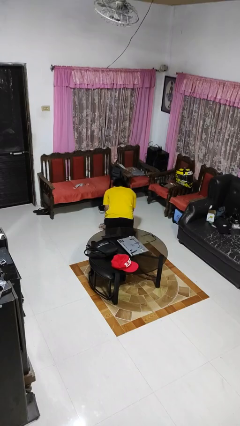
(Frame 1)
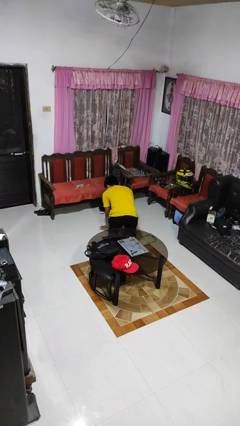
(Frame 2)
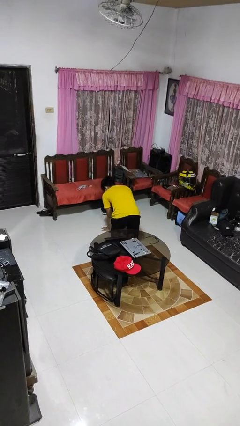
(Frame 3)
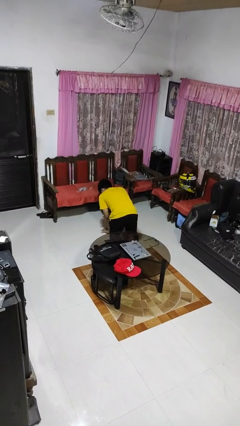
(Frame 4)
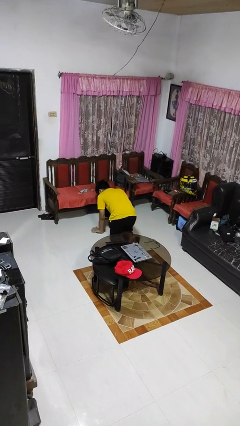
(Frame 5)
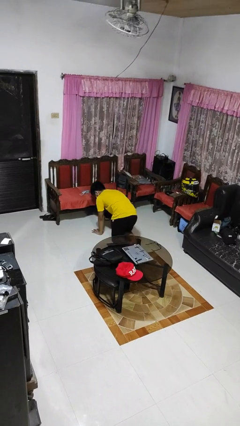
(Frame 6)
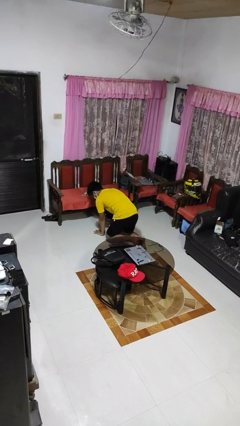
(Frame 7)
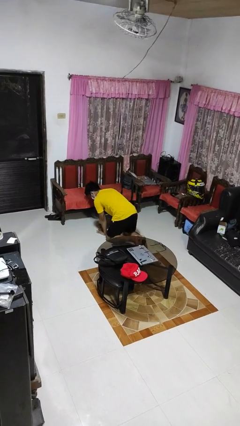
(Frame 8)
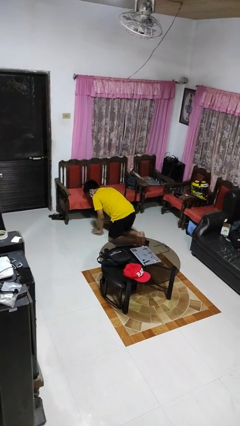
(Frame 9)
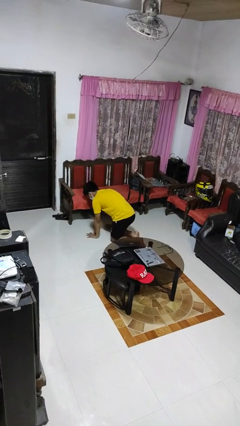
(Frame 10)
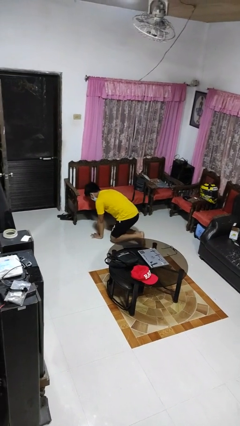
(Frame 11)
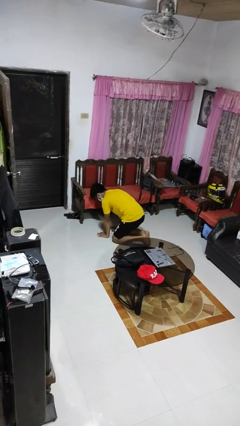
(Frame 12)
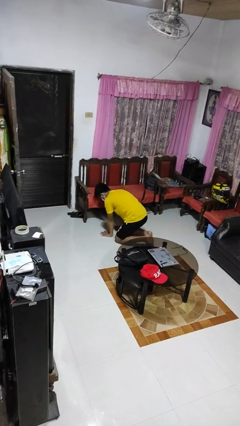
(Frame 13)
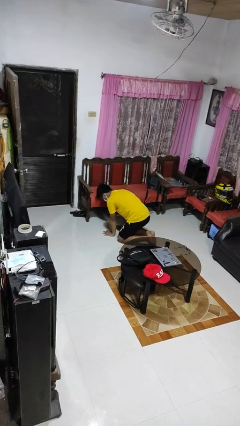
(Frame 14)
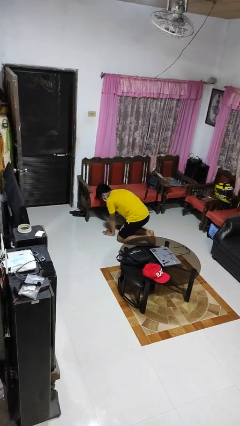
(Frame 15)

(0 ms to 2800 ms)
person crawls

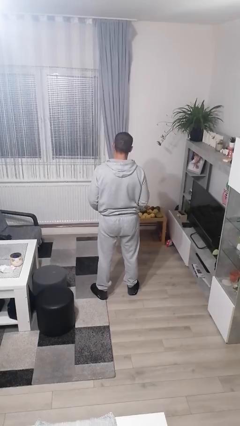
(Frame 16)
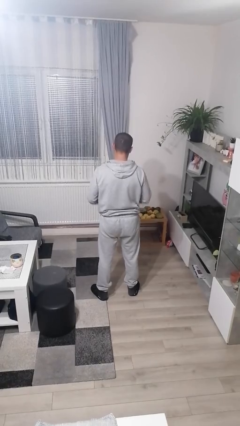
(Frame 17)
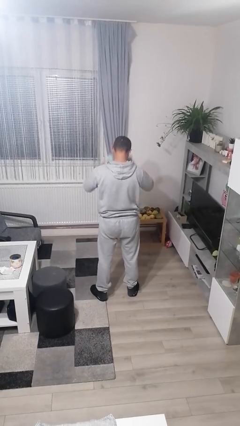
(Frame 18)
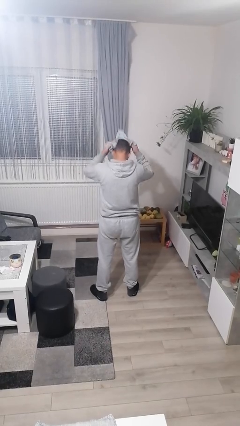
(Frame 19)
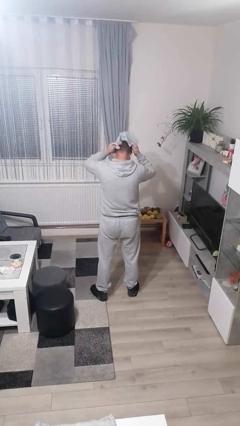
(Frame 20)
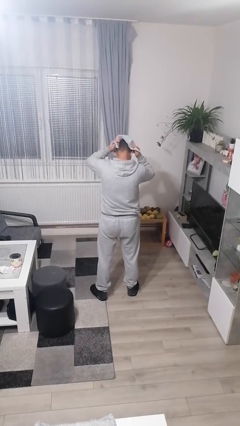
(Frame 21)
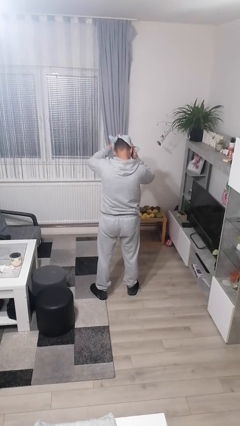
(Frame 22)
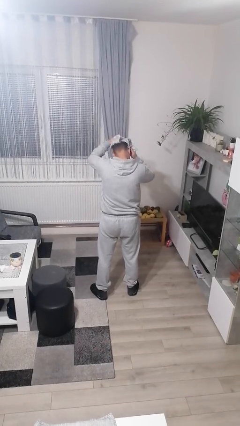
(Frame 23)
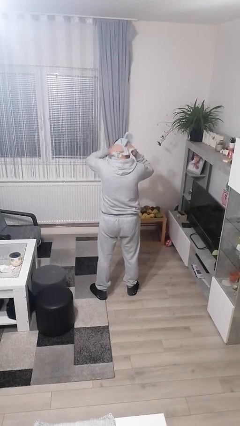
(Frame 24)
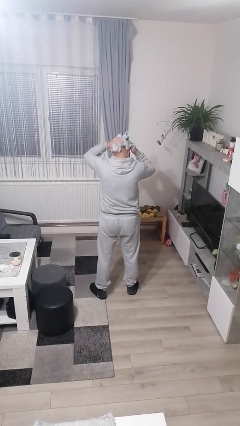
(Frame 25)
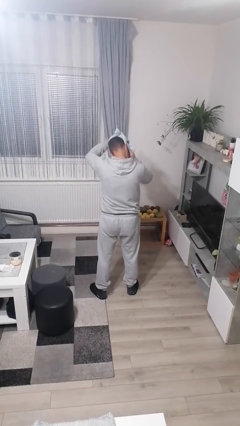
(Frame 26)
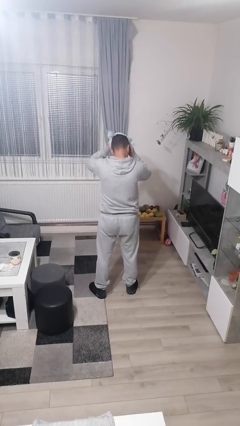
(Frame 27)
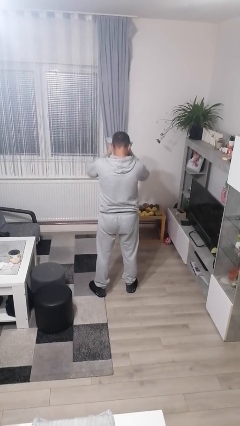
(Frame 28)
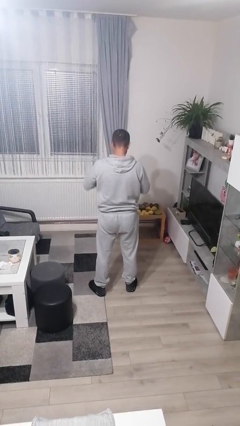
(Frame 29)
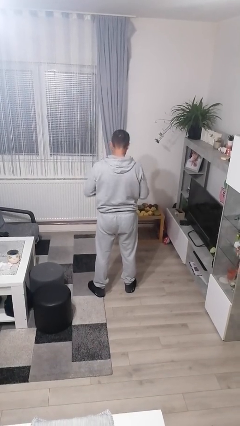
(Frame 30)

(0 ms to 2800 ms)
person dries hair with towel

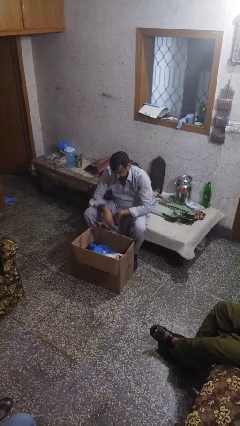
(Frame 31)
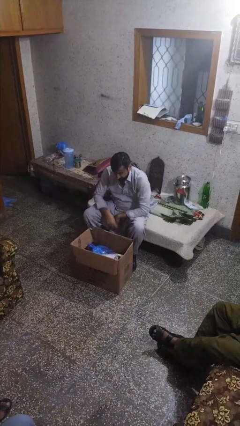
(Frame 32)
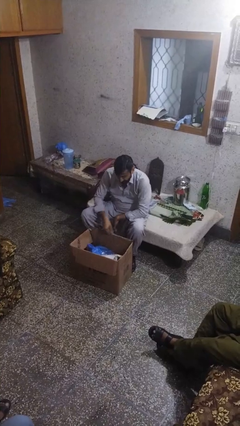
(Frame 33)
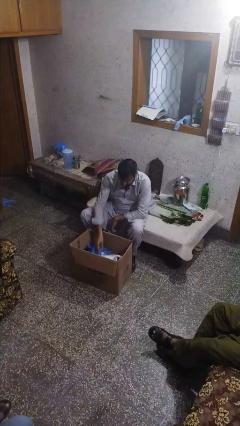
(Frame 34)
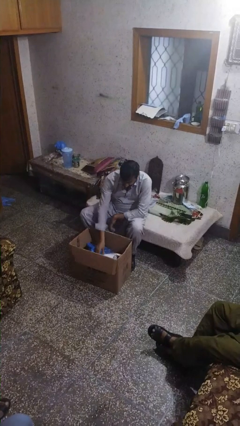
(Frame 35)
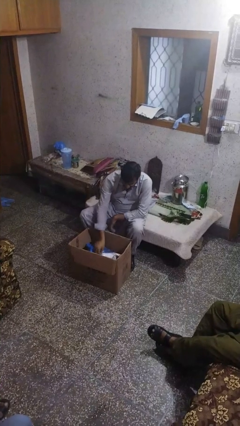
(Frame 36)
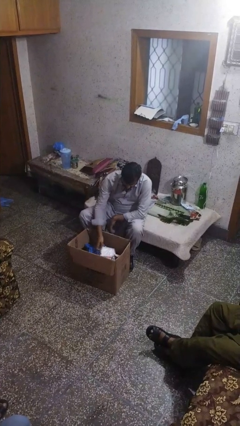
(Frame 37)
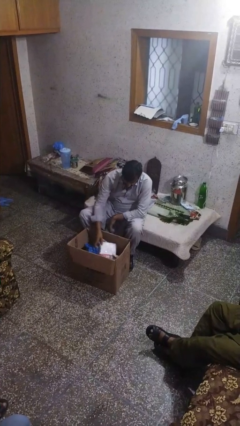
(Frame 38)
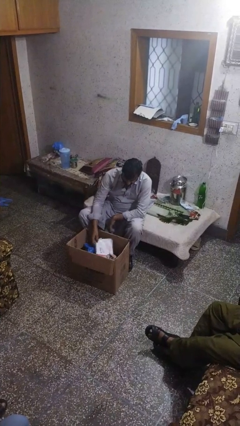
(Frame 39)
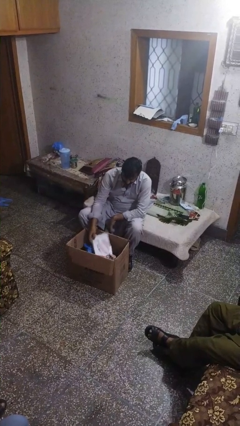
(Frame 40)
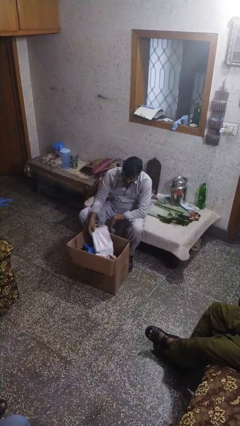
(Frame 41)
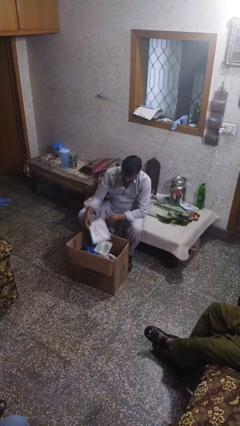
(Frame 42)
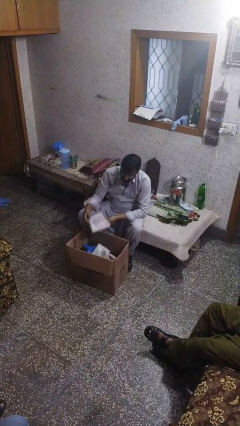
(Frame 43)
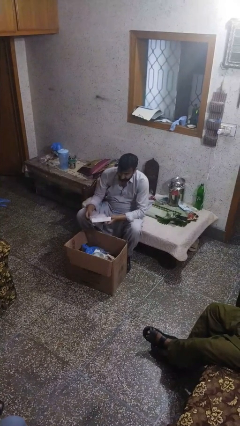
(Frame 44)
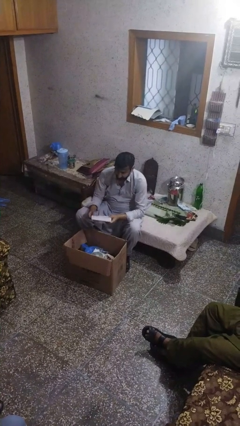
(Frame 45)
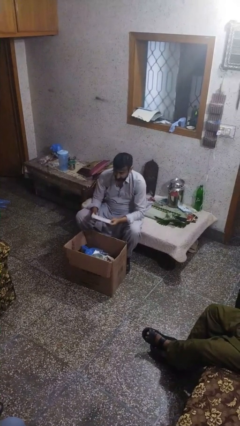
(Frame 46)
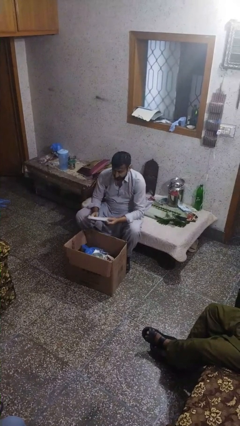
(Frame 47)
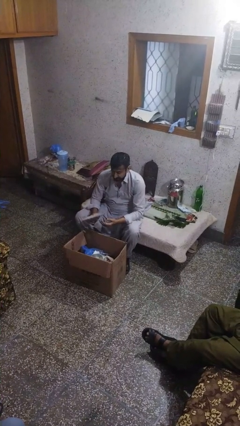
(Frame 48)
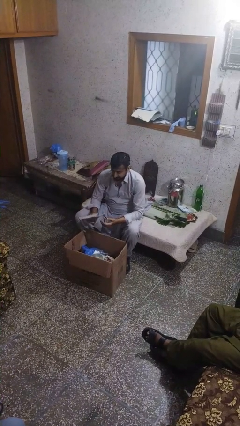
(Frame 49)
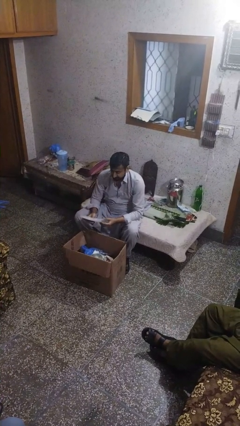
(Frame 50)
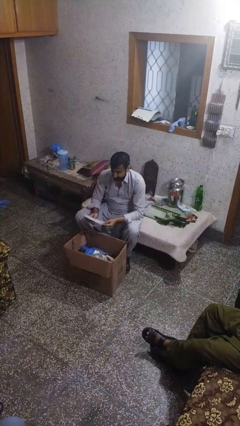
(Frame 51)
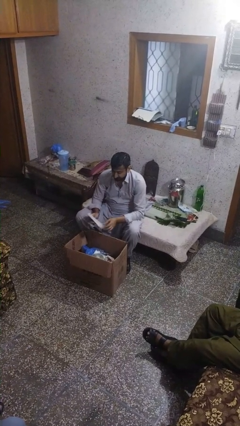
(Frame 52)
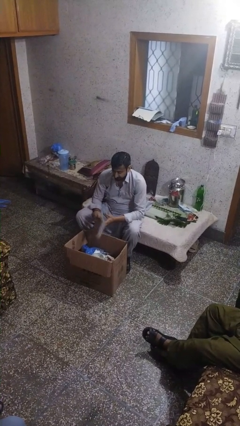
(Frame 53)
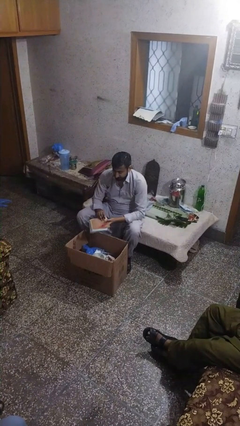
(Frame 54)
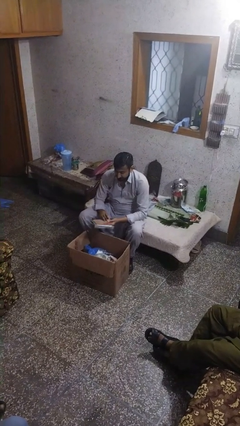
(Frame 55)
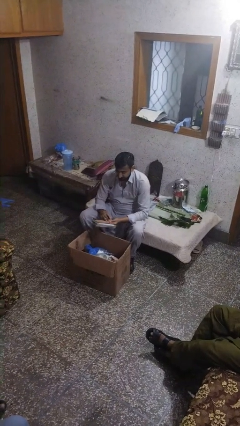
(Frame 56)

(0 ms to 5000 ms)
person takes object from box

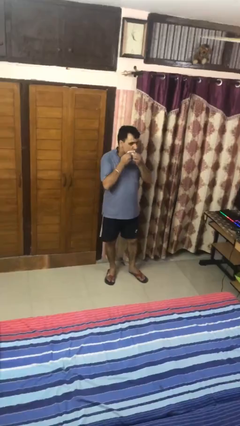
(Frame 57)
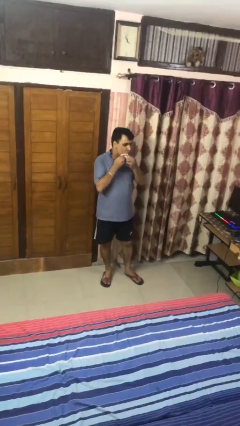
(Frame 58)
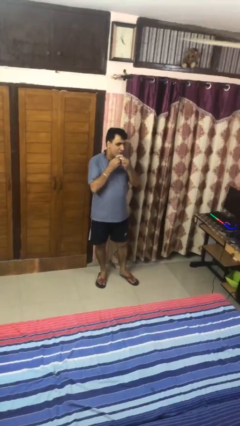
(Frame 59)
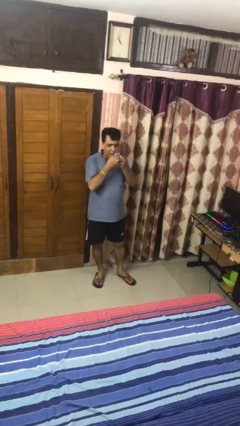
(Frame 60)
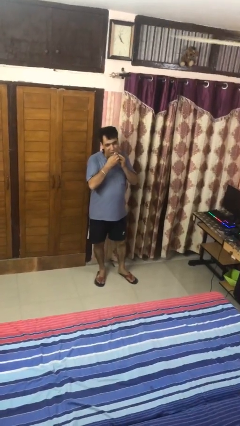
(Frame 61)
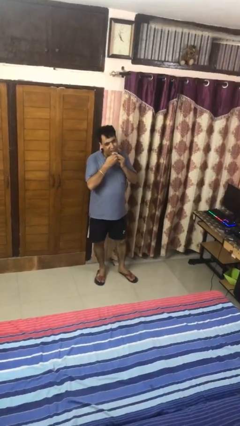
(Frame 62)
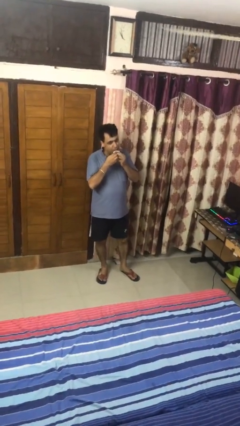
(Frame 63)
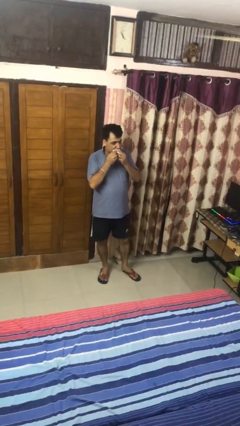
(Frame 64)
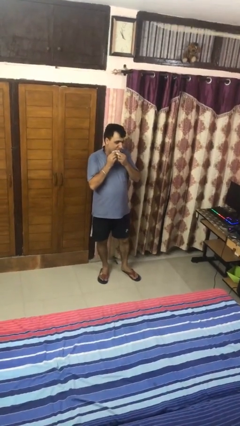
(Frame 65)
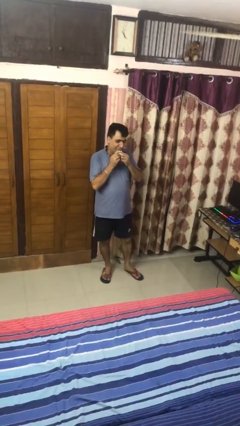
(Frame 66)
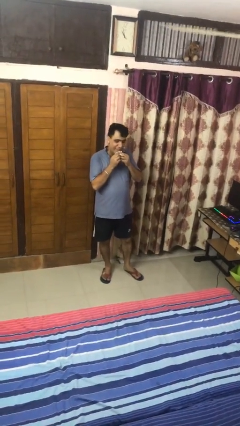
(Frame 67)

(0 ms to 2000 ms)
person wipes mouth with napkin

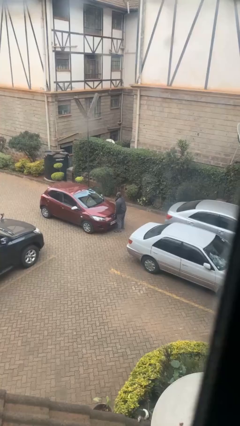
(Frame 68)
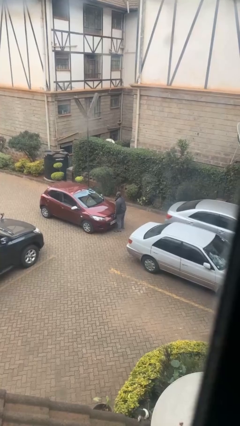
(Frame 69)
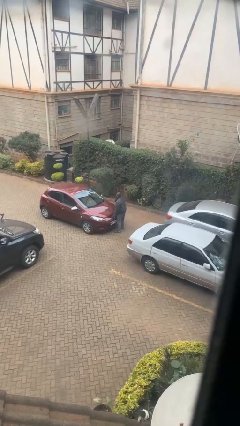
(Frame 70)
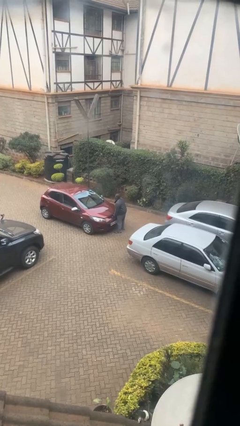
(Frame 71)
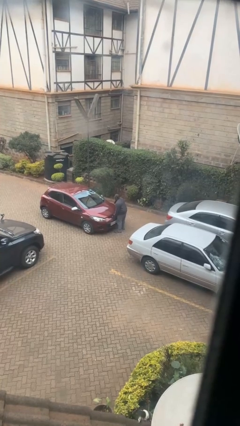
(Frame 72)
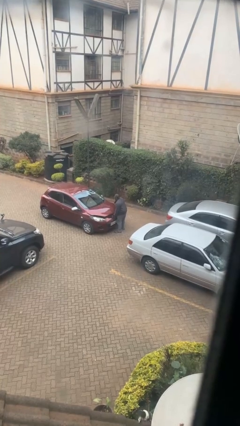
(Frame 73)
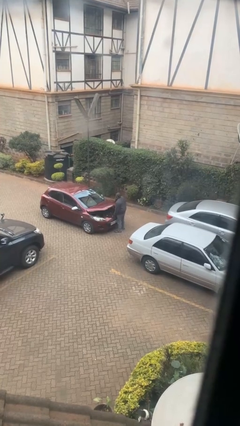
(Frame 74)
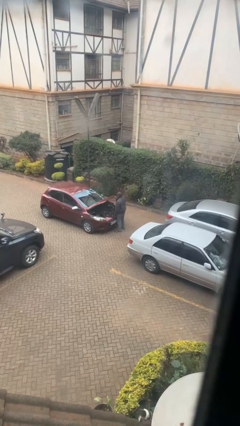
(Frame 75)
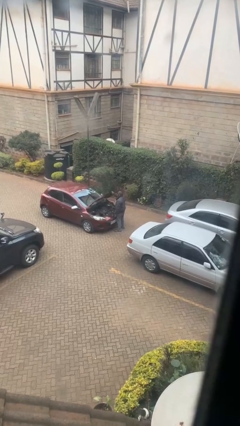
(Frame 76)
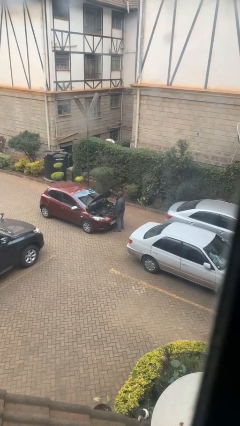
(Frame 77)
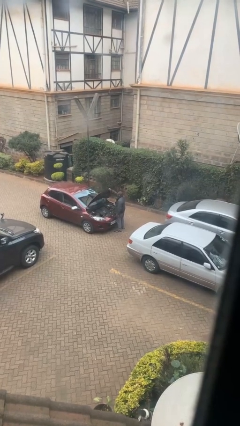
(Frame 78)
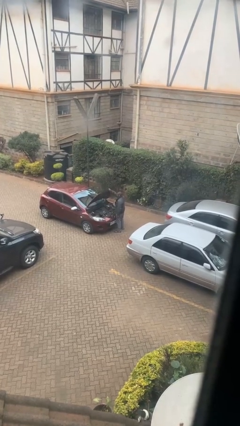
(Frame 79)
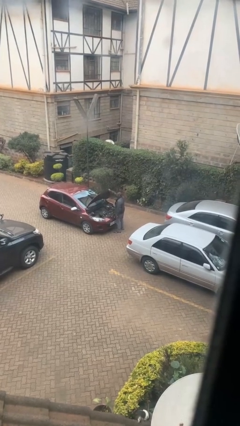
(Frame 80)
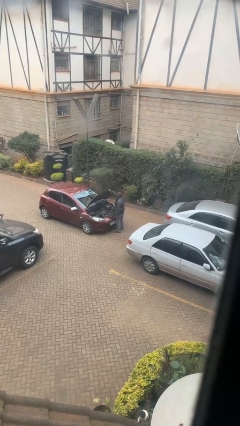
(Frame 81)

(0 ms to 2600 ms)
person opens car hood

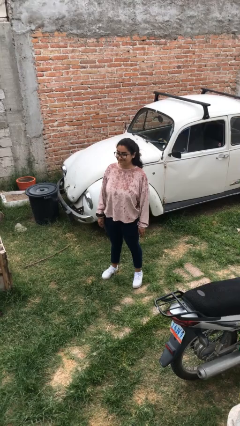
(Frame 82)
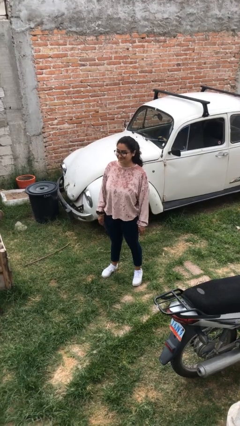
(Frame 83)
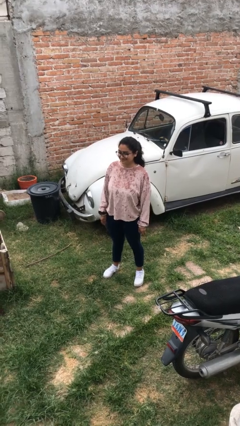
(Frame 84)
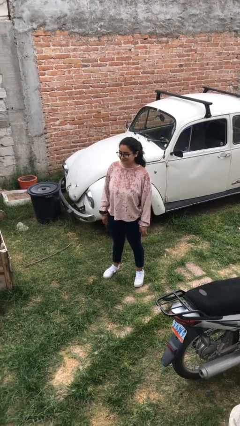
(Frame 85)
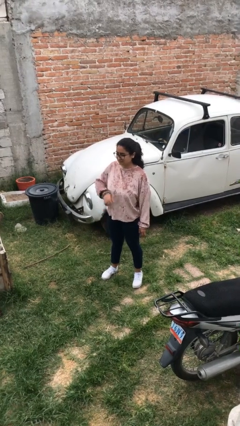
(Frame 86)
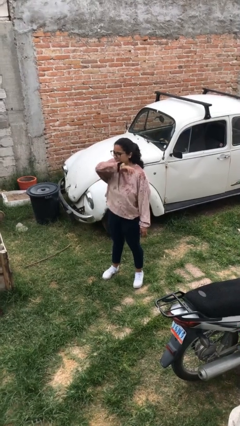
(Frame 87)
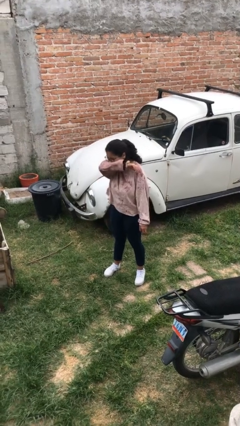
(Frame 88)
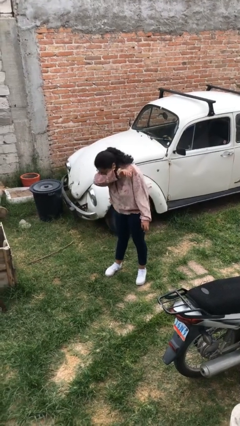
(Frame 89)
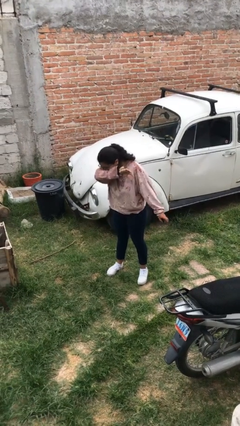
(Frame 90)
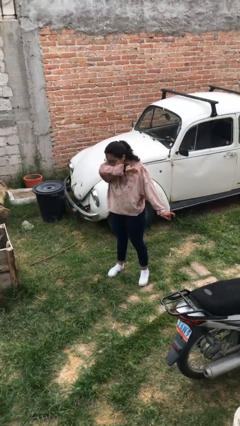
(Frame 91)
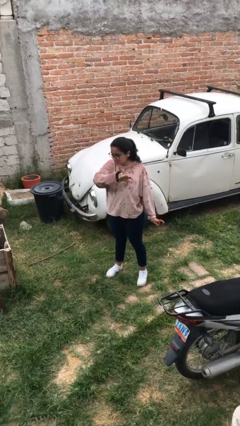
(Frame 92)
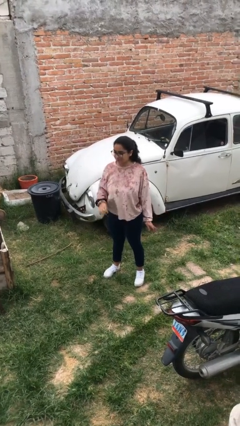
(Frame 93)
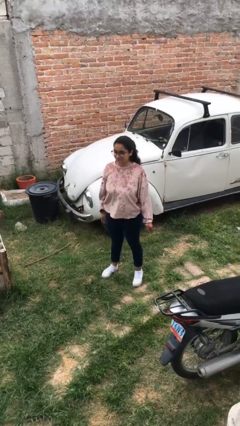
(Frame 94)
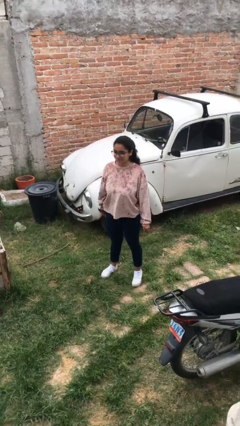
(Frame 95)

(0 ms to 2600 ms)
person sneezes into arm
